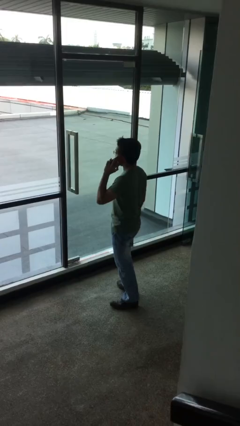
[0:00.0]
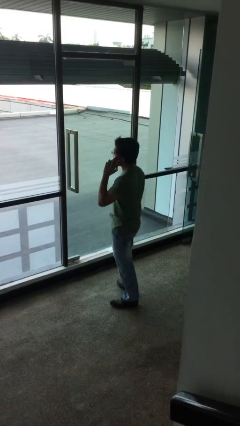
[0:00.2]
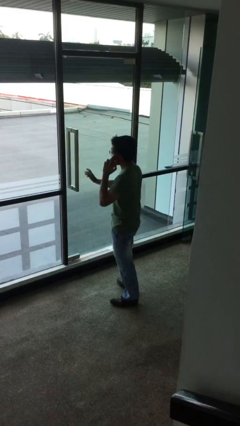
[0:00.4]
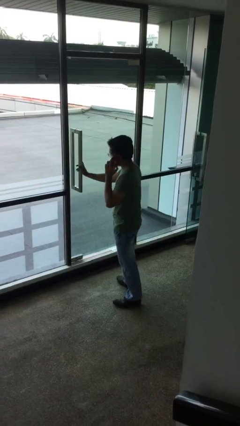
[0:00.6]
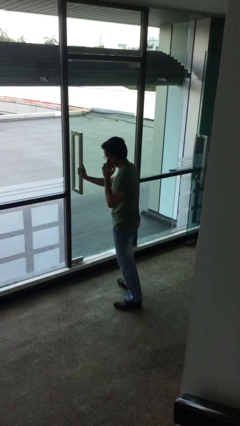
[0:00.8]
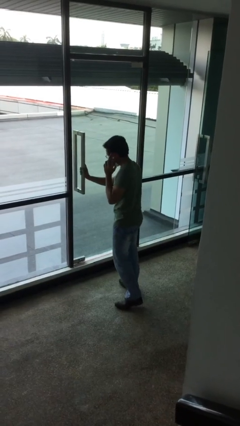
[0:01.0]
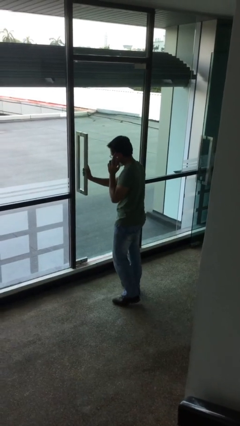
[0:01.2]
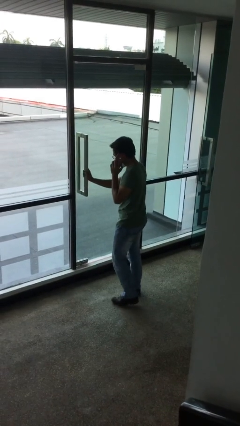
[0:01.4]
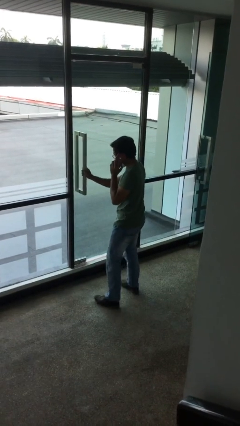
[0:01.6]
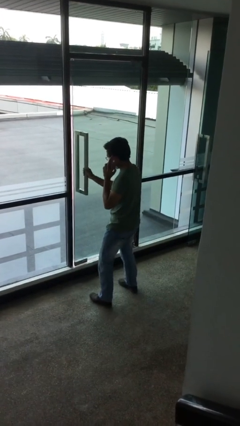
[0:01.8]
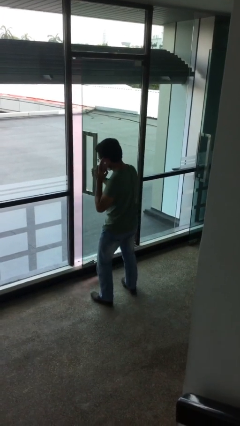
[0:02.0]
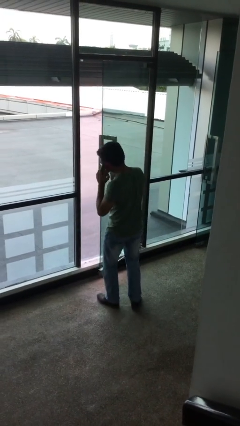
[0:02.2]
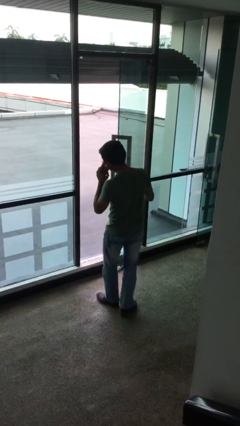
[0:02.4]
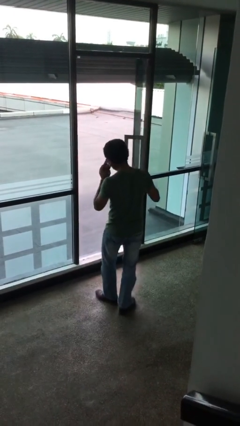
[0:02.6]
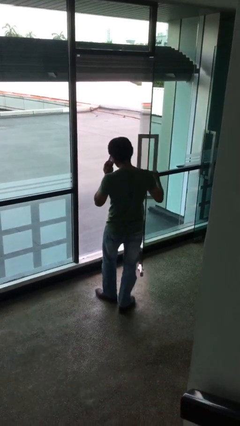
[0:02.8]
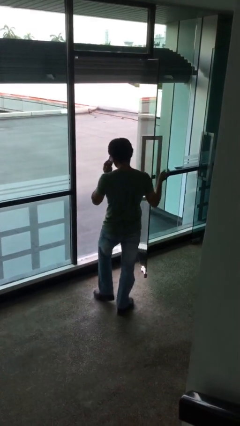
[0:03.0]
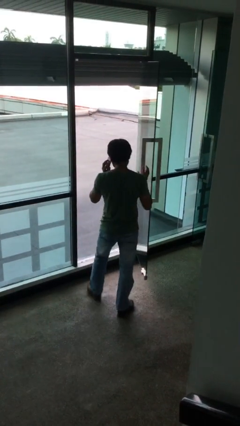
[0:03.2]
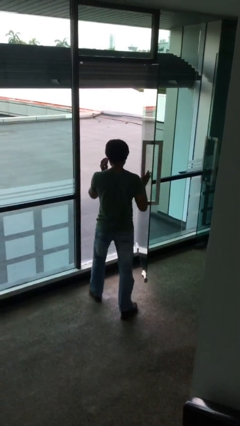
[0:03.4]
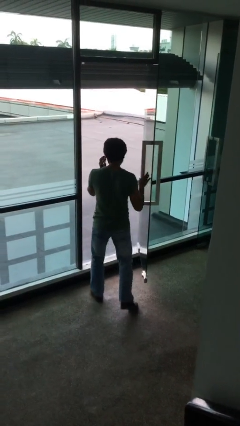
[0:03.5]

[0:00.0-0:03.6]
person opens facility door

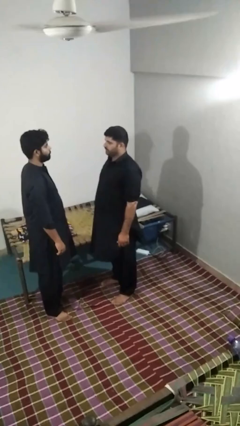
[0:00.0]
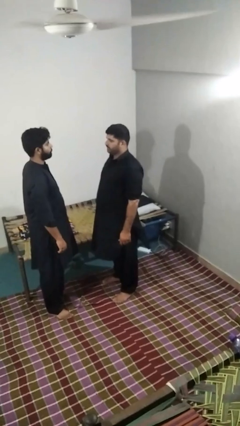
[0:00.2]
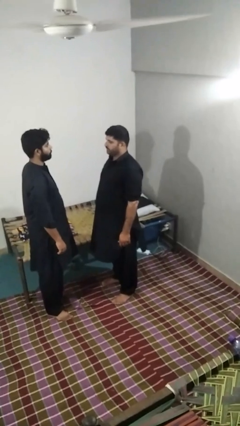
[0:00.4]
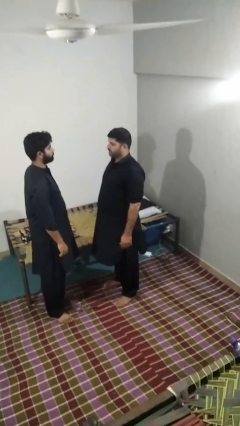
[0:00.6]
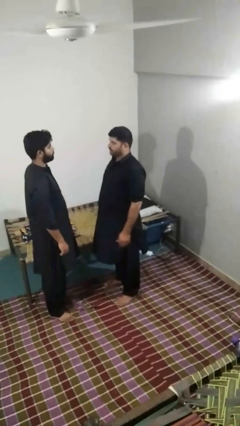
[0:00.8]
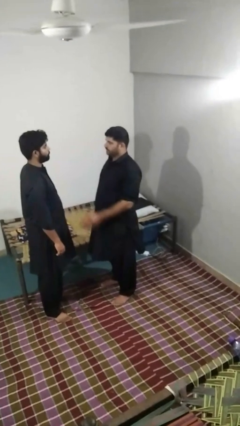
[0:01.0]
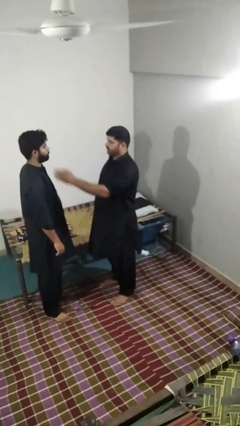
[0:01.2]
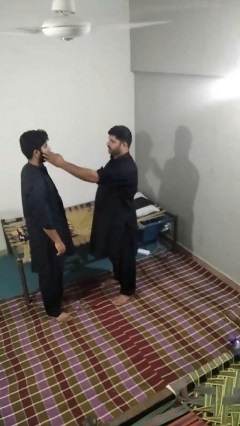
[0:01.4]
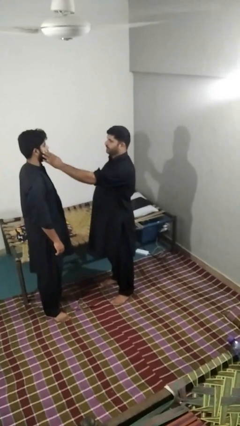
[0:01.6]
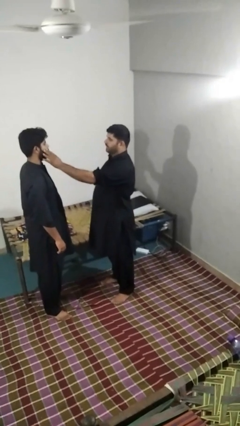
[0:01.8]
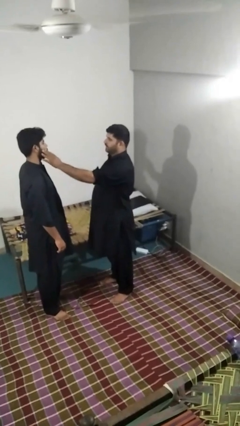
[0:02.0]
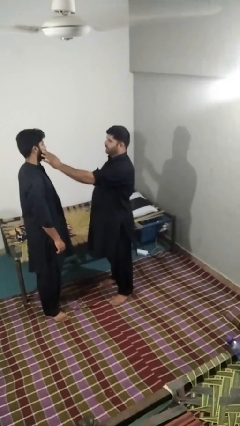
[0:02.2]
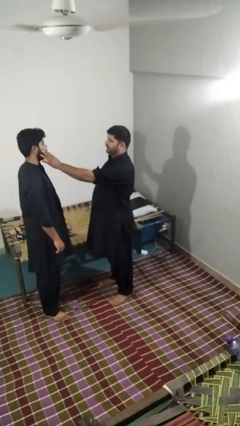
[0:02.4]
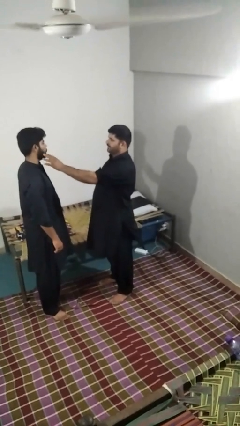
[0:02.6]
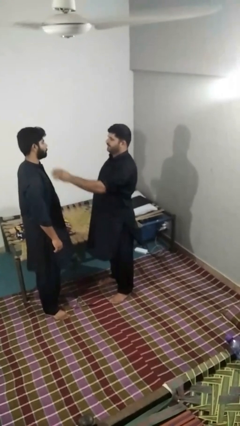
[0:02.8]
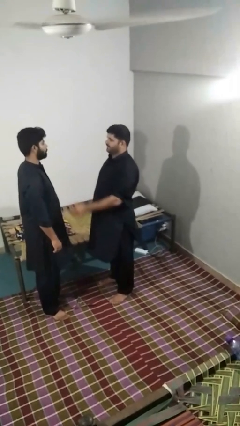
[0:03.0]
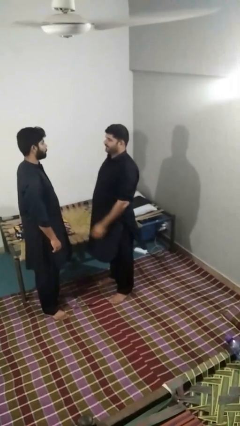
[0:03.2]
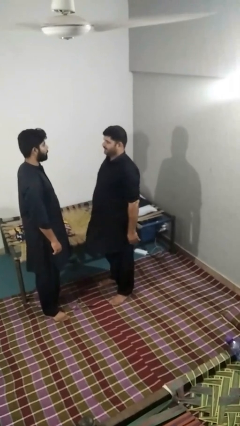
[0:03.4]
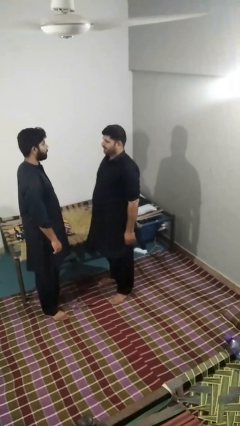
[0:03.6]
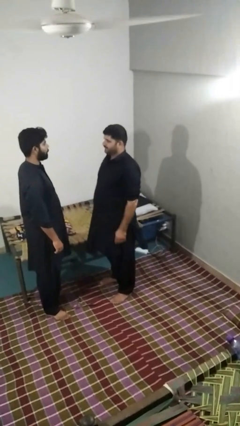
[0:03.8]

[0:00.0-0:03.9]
person touches face of person

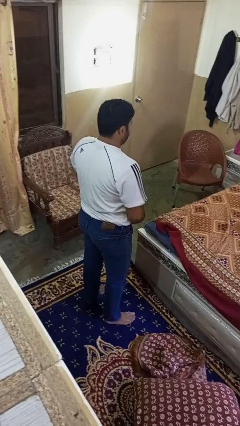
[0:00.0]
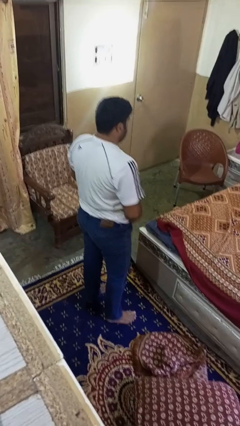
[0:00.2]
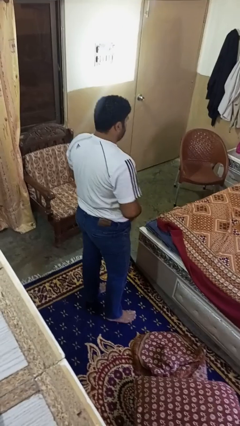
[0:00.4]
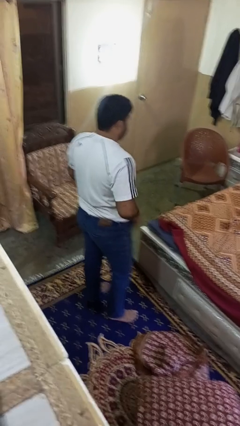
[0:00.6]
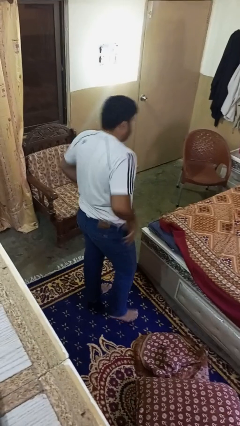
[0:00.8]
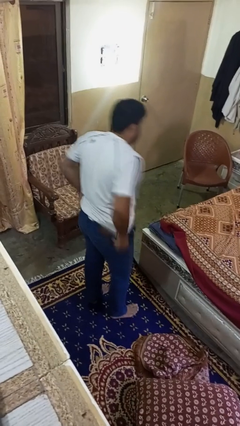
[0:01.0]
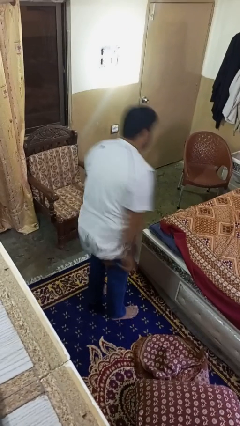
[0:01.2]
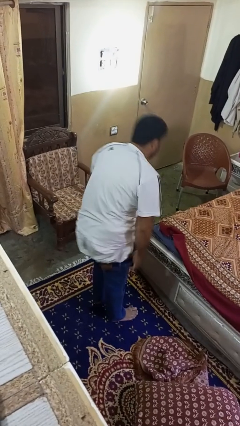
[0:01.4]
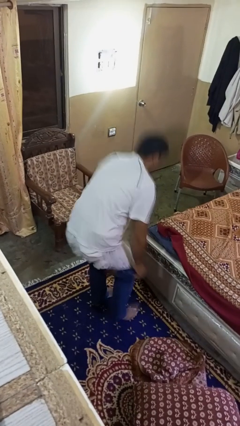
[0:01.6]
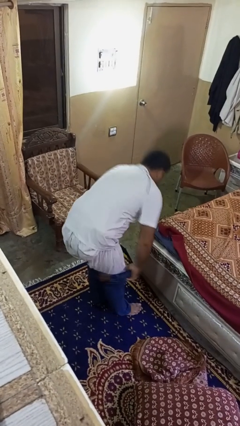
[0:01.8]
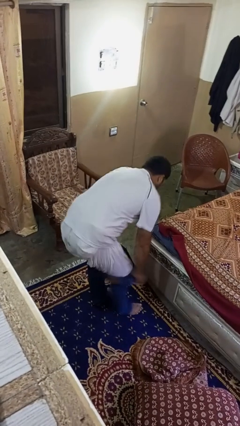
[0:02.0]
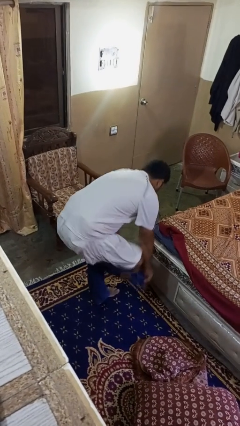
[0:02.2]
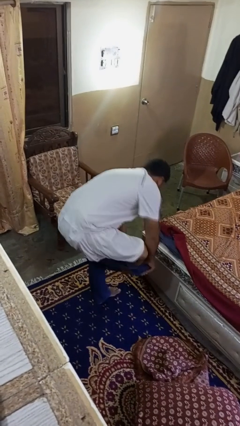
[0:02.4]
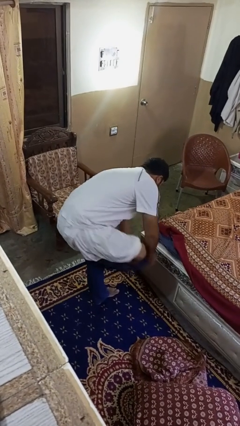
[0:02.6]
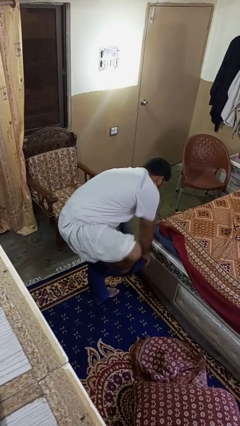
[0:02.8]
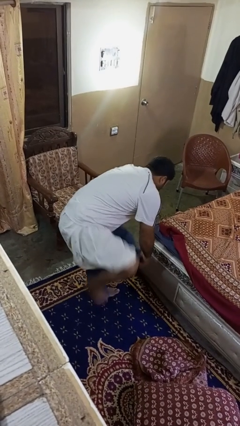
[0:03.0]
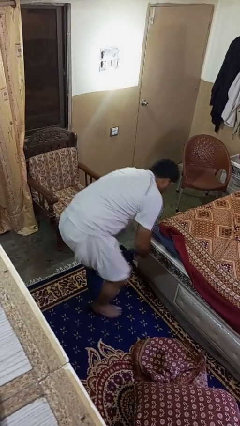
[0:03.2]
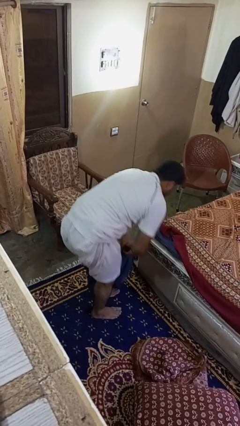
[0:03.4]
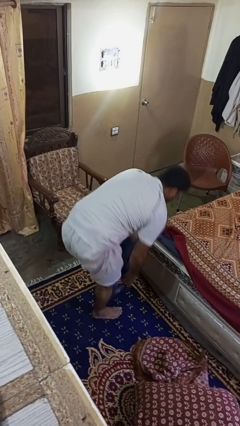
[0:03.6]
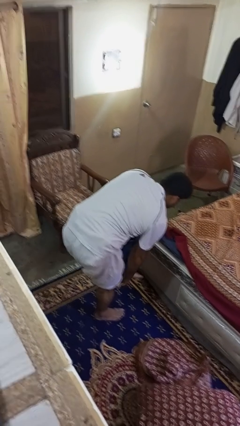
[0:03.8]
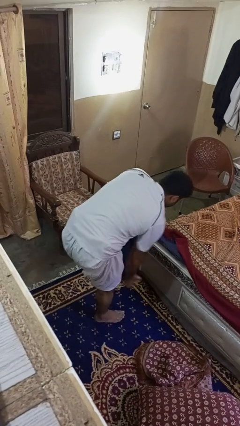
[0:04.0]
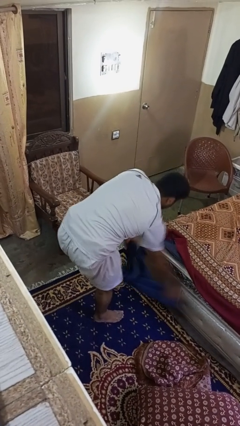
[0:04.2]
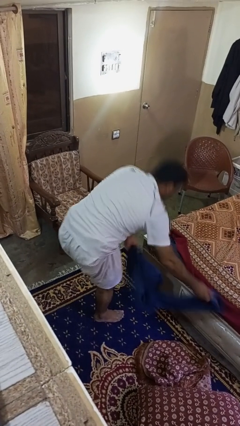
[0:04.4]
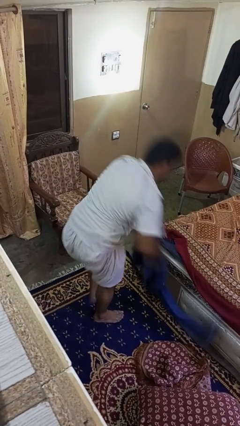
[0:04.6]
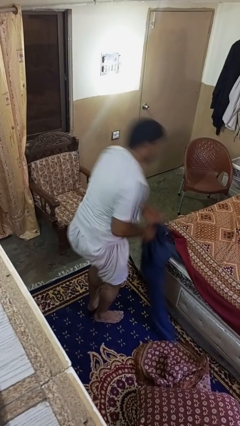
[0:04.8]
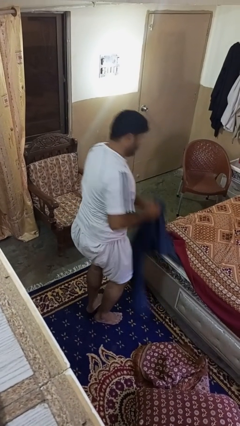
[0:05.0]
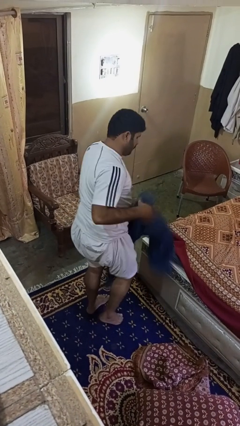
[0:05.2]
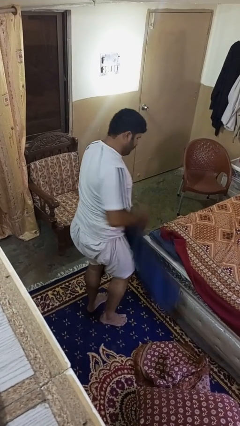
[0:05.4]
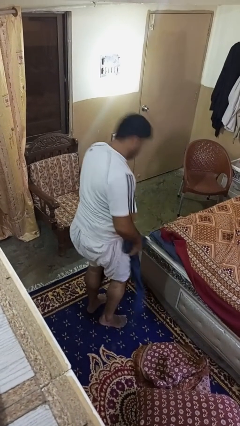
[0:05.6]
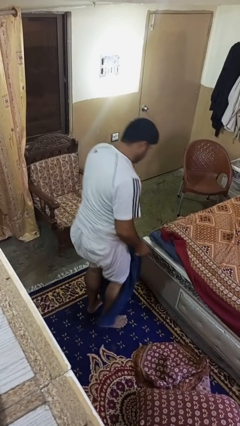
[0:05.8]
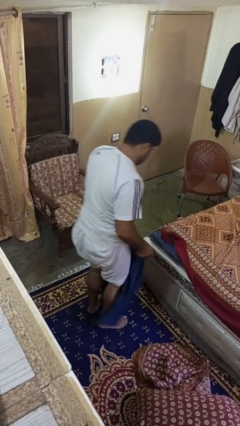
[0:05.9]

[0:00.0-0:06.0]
person takes off pants

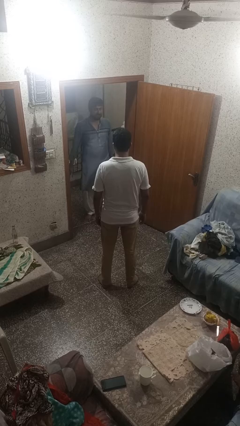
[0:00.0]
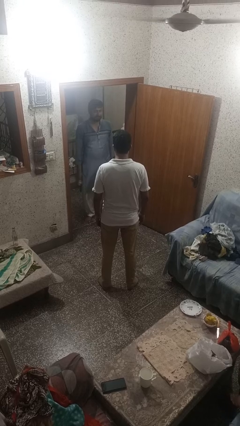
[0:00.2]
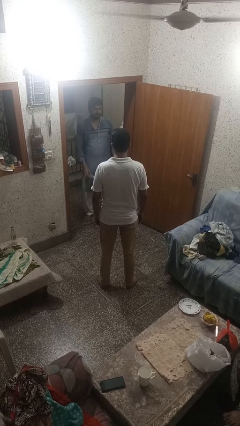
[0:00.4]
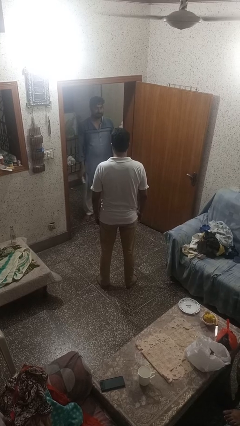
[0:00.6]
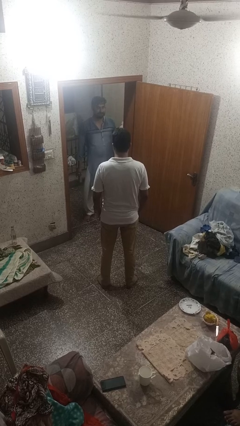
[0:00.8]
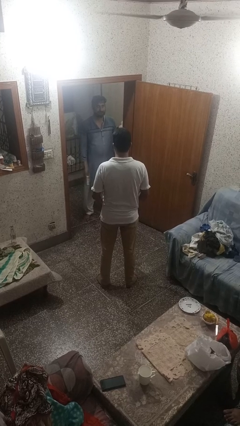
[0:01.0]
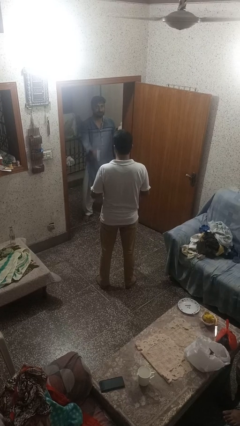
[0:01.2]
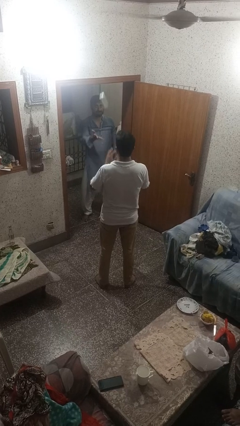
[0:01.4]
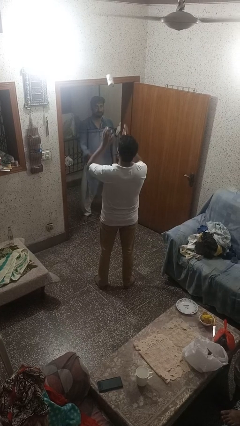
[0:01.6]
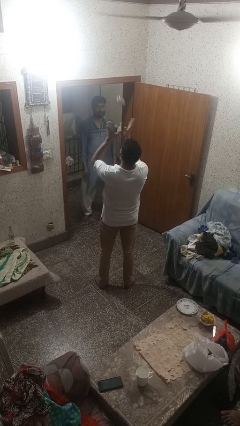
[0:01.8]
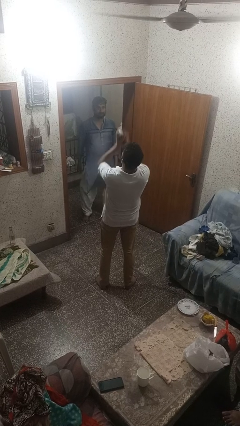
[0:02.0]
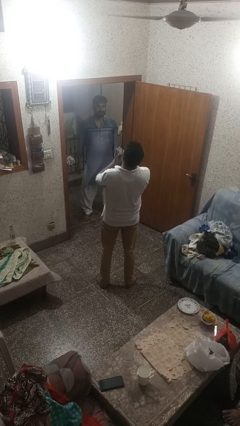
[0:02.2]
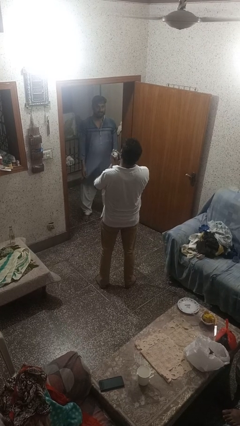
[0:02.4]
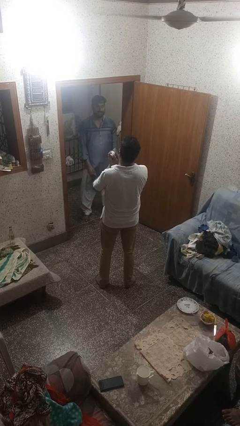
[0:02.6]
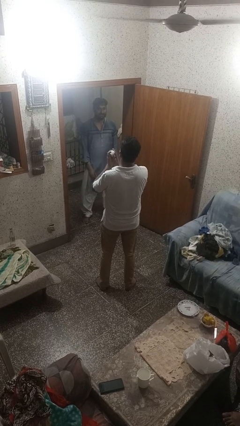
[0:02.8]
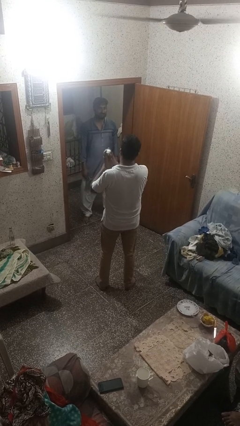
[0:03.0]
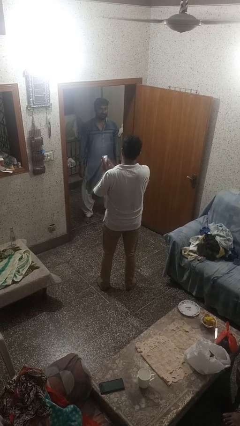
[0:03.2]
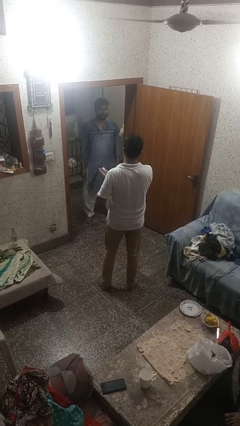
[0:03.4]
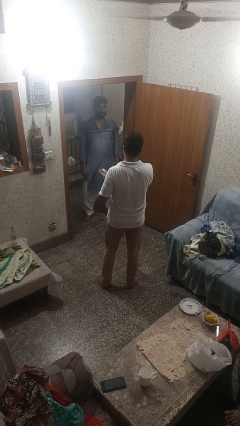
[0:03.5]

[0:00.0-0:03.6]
person catches object from person

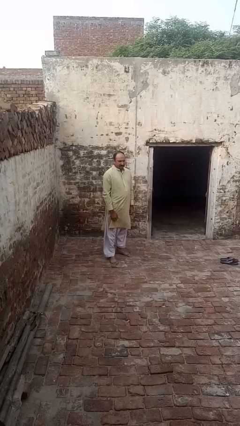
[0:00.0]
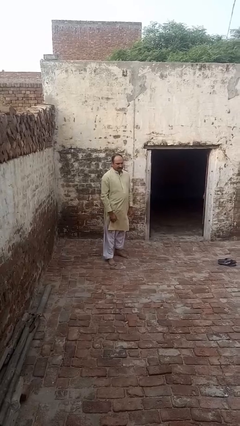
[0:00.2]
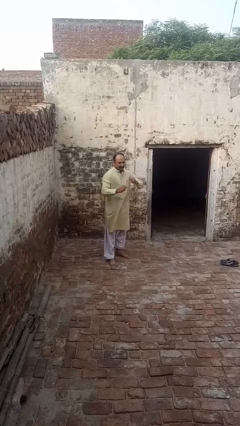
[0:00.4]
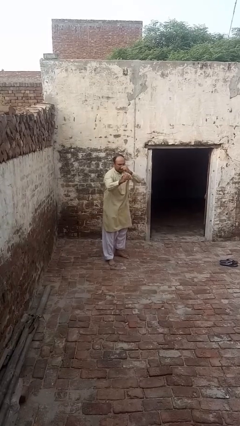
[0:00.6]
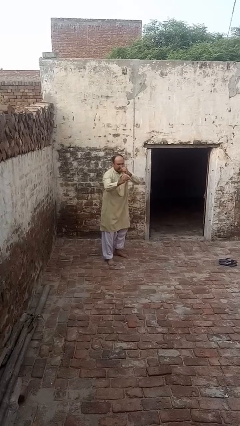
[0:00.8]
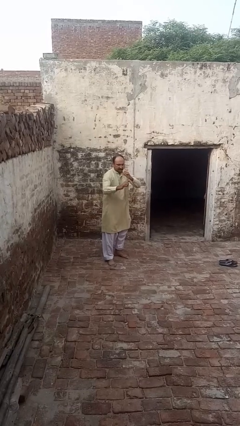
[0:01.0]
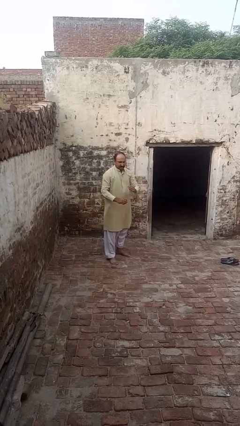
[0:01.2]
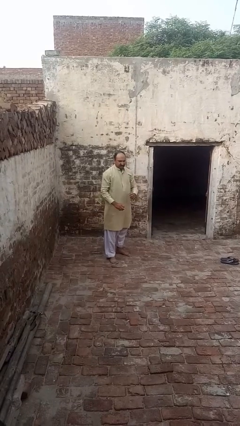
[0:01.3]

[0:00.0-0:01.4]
person karate chop
